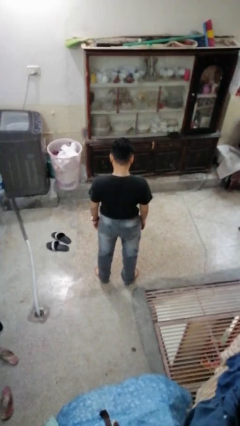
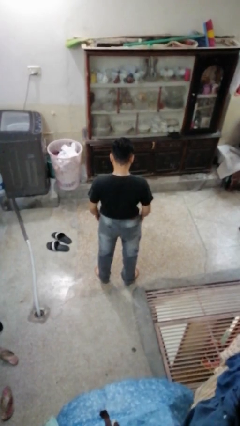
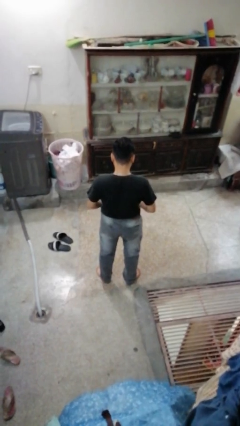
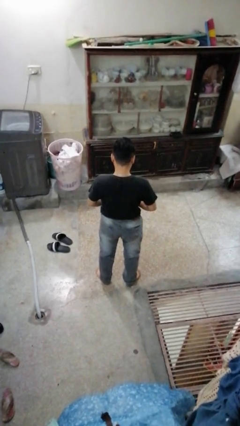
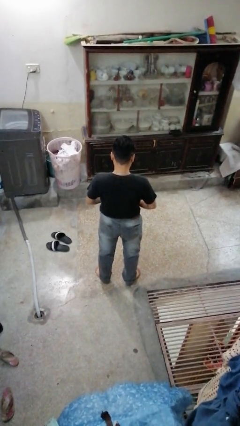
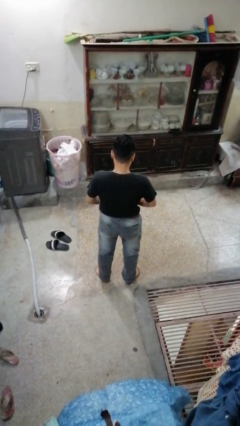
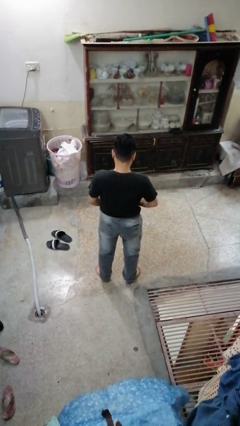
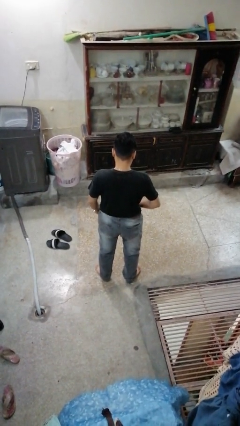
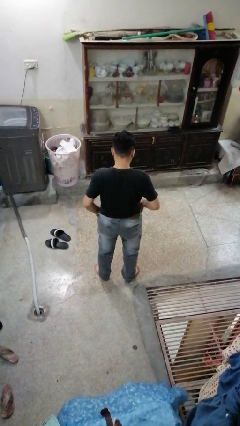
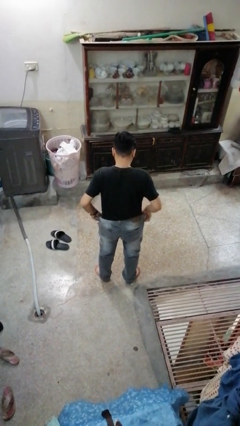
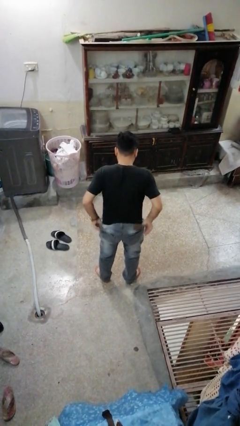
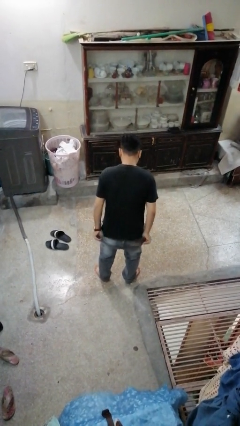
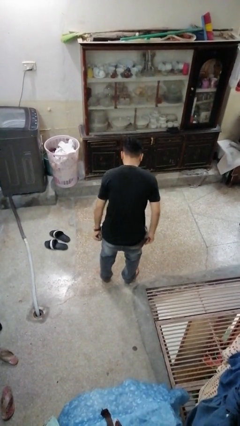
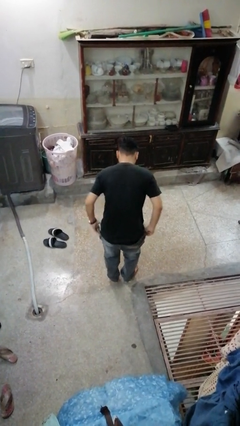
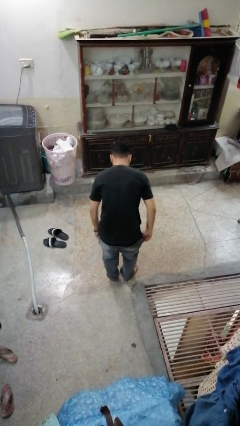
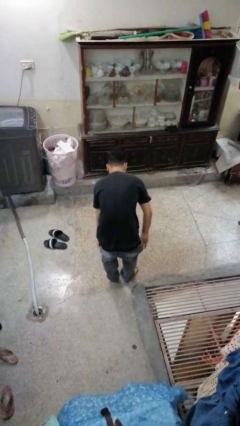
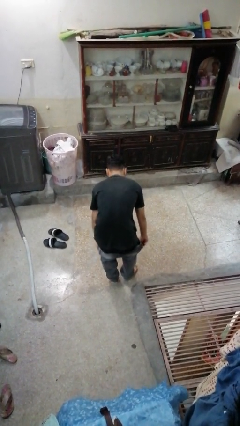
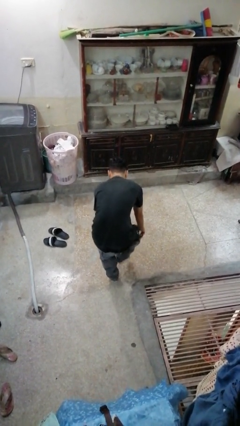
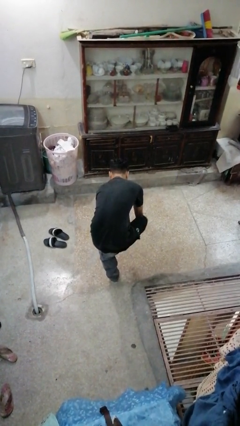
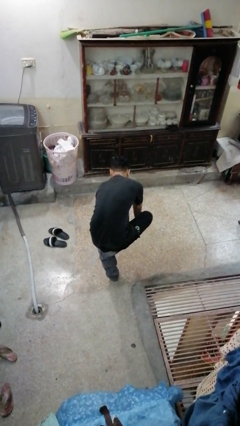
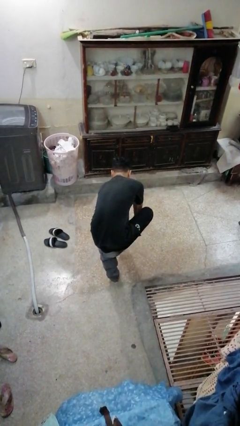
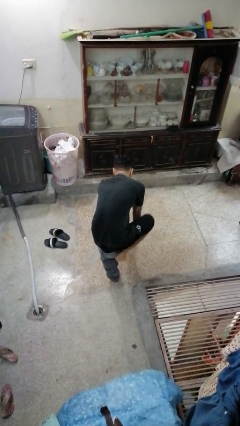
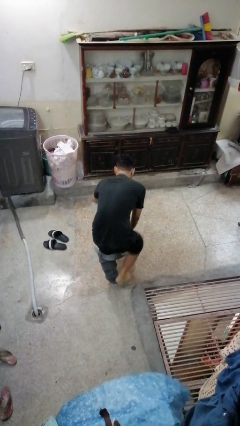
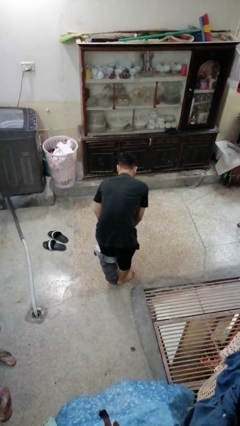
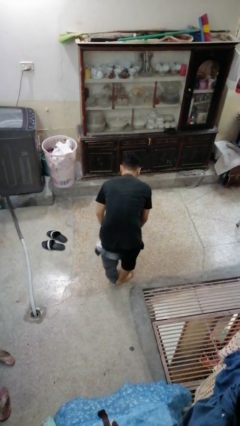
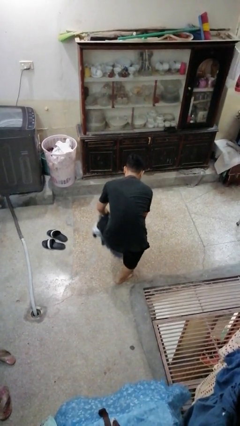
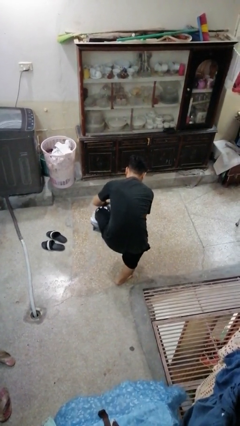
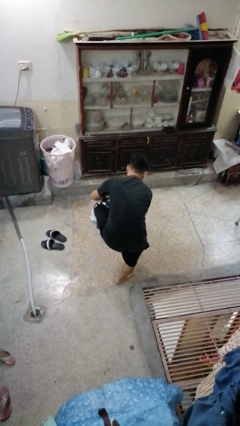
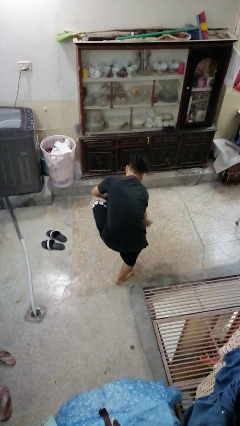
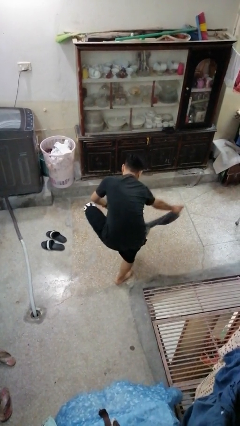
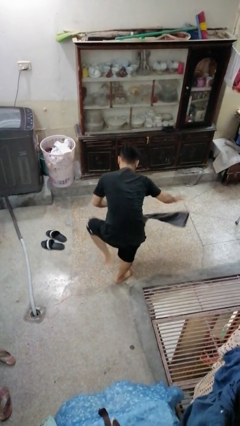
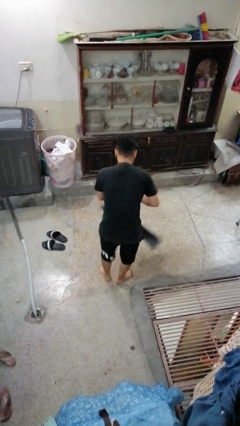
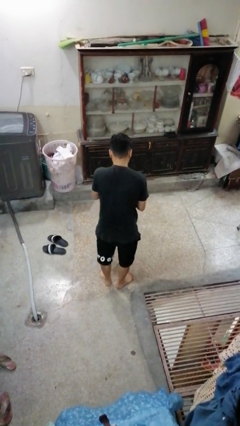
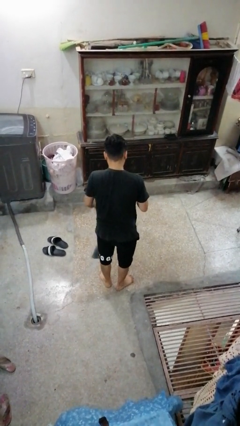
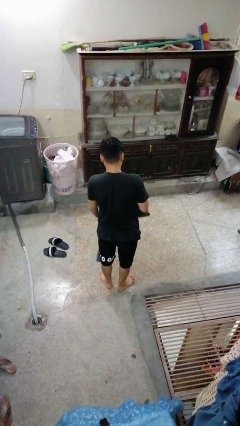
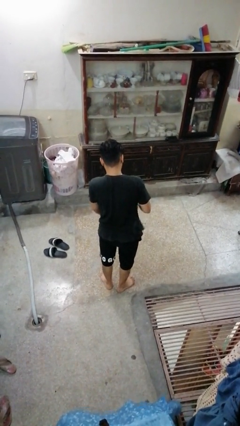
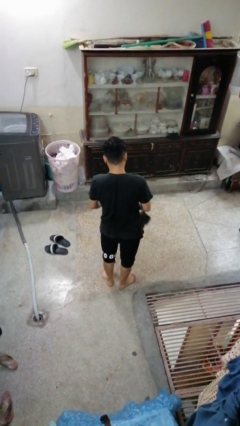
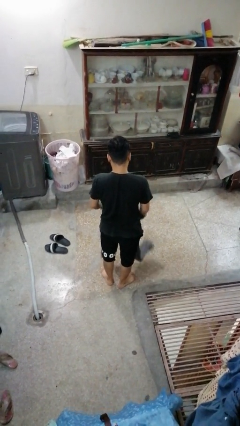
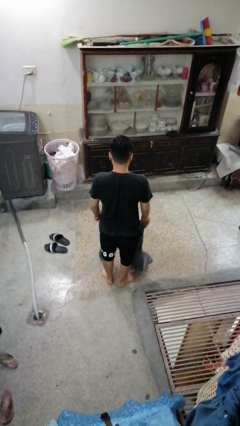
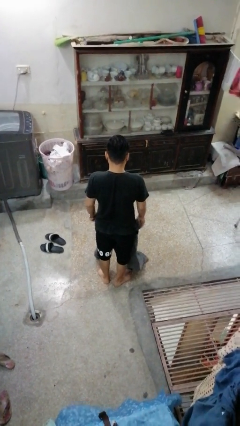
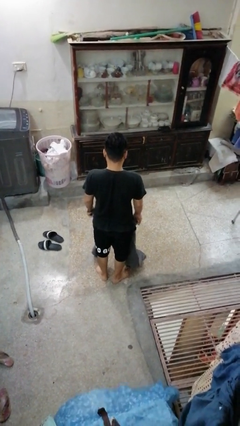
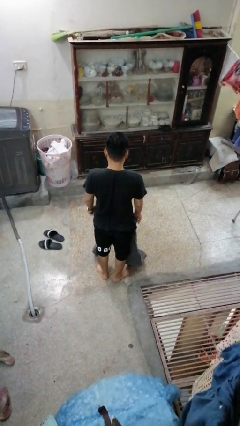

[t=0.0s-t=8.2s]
person takes off pants

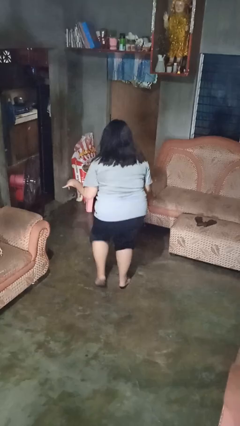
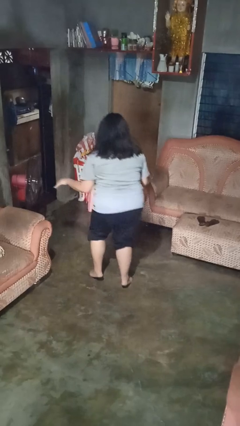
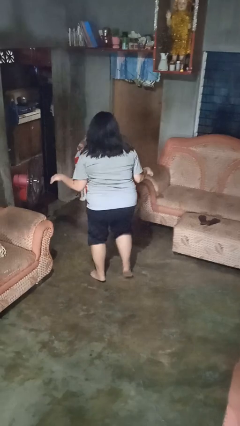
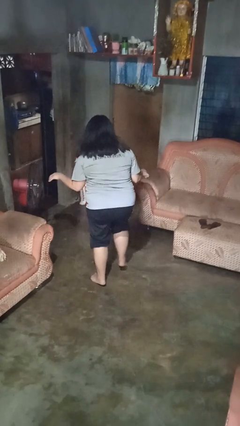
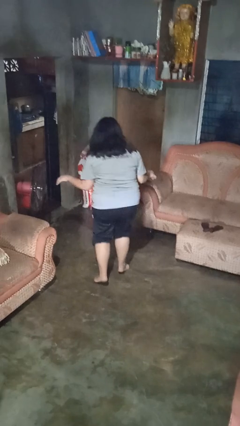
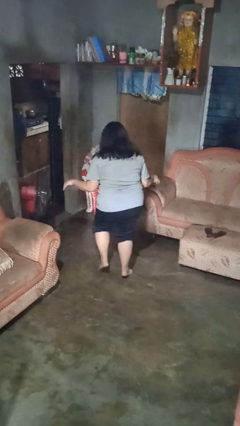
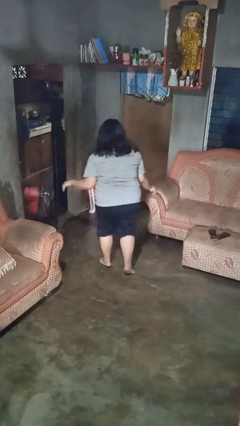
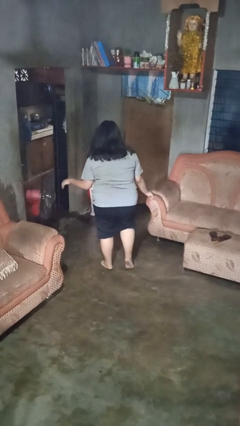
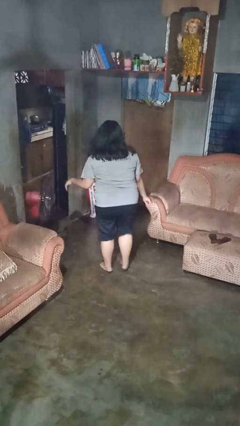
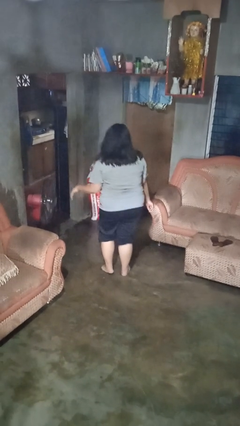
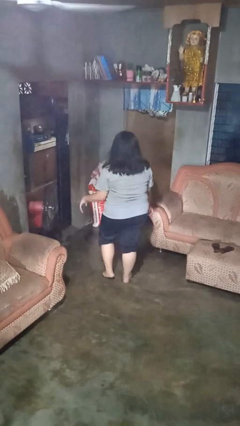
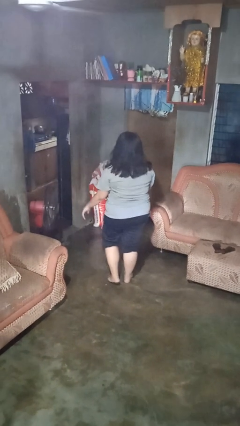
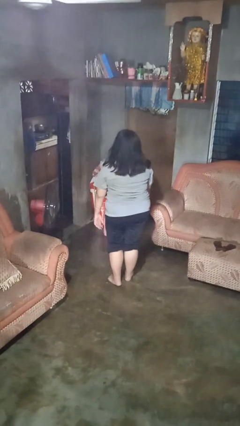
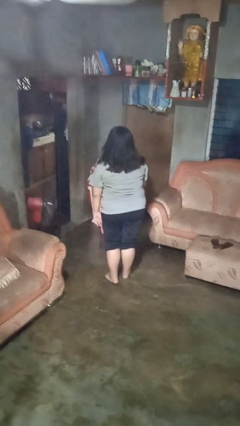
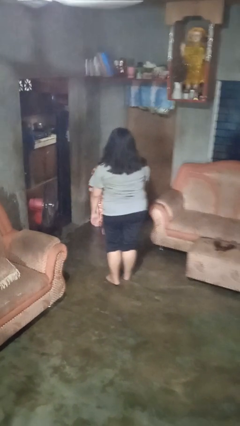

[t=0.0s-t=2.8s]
person walks tiptoe

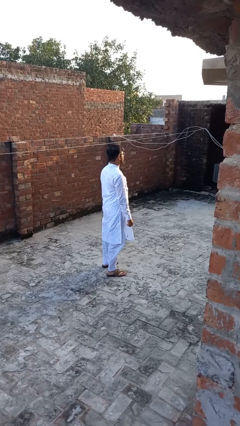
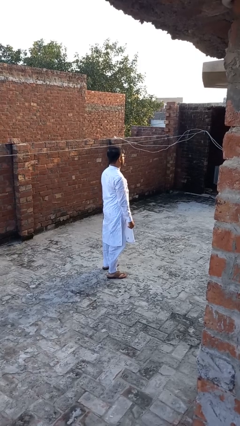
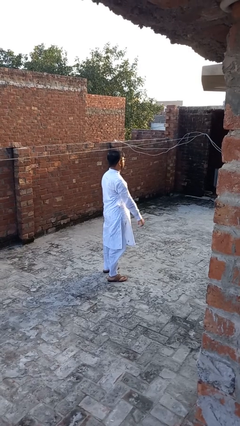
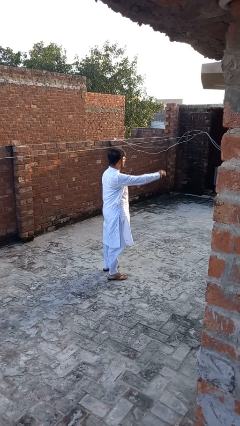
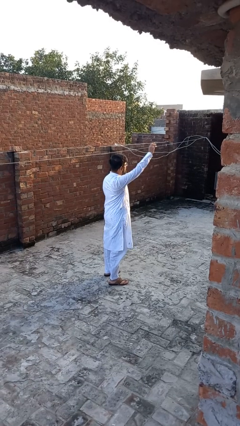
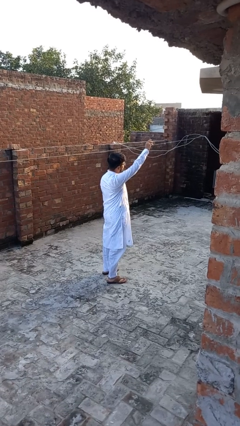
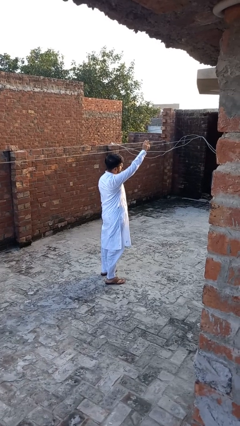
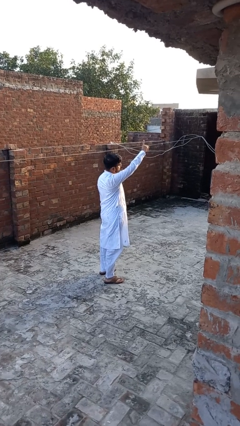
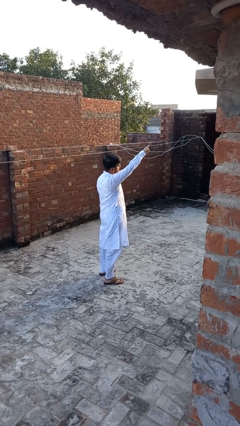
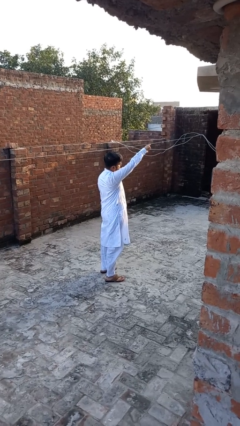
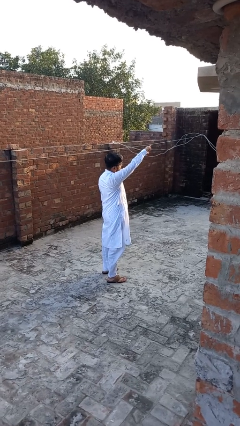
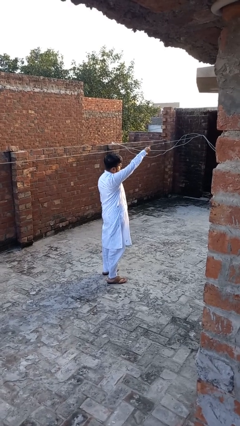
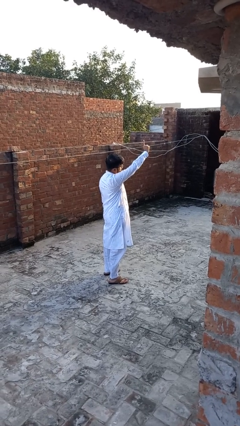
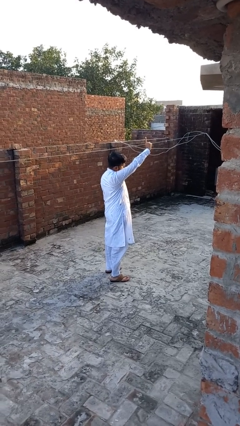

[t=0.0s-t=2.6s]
person gestures raise hand

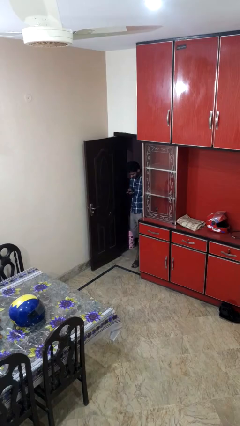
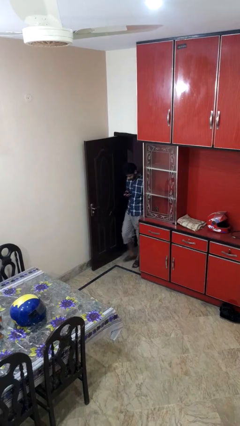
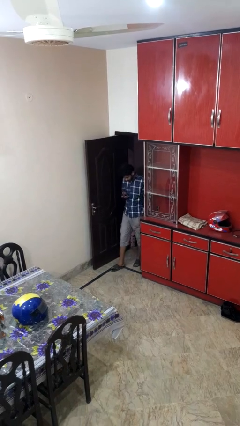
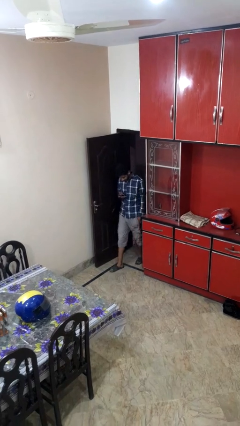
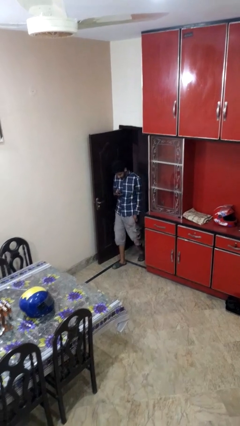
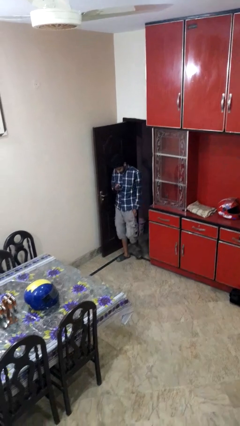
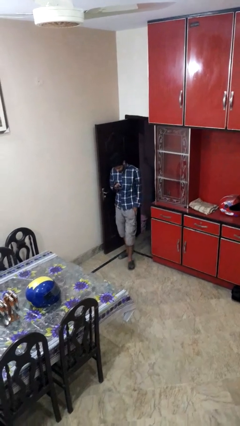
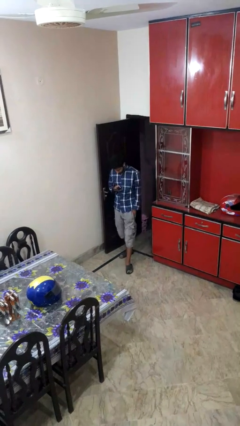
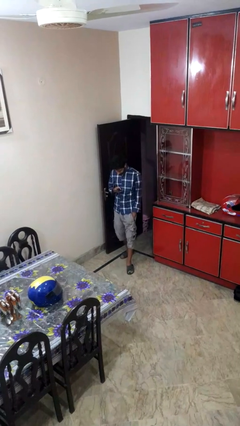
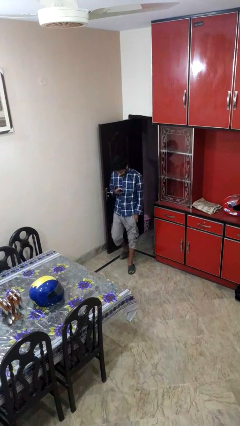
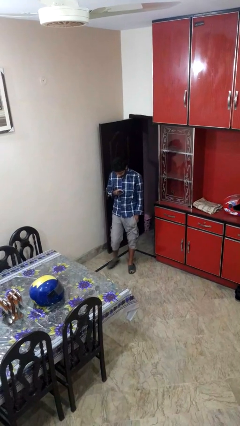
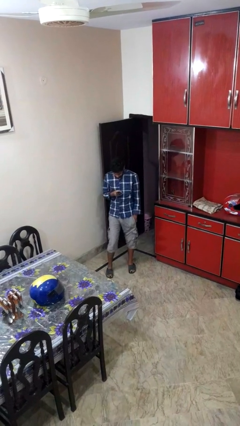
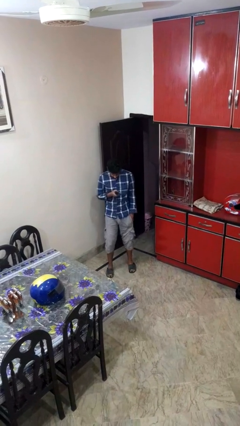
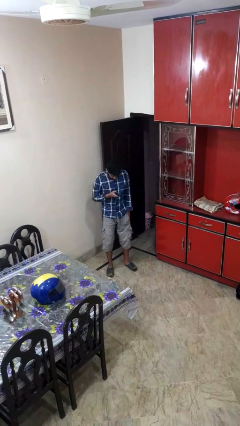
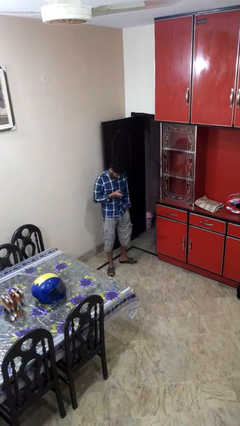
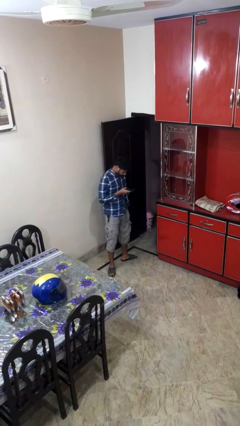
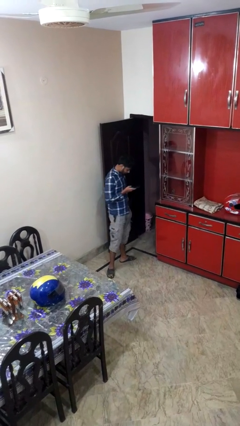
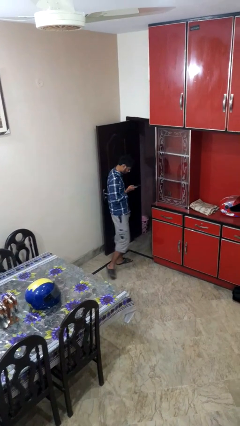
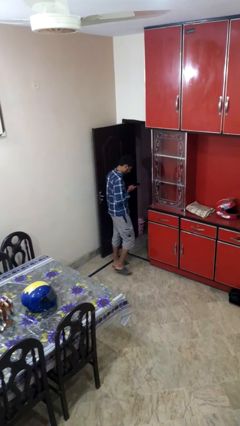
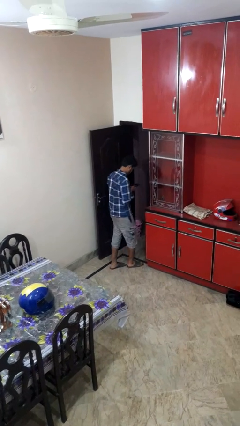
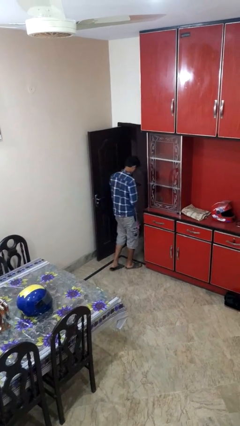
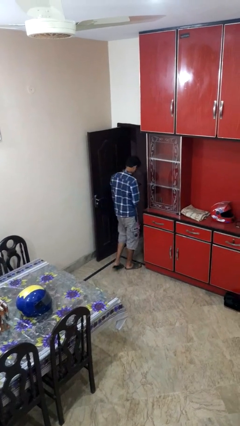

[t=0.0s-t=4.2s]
person enters scene through structure
